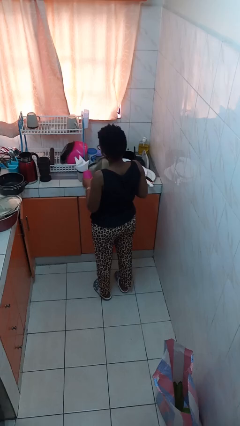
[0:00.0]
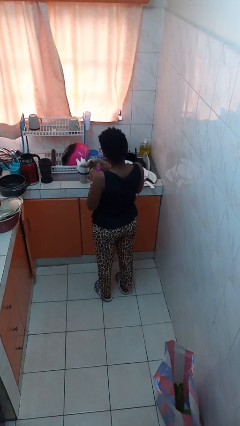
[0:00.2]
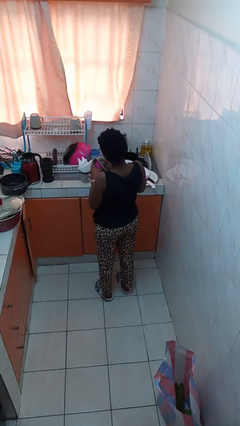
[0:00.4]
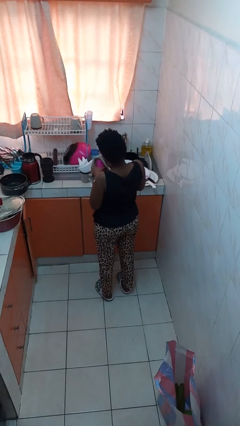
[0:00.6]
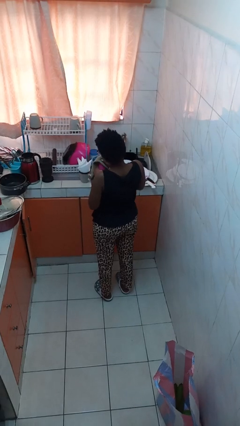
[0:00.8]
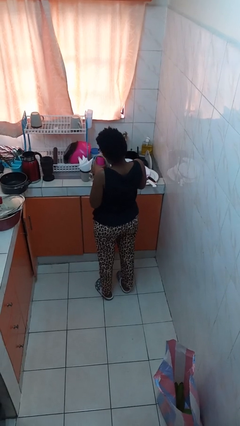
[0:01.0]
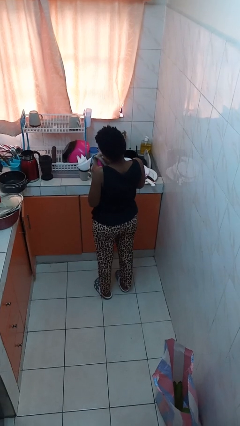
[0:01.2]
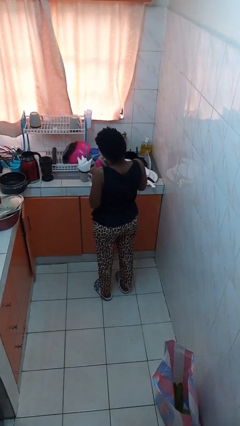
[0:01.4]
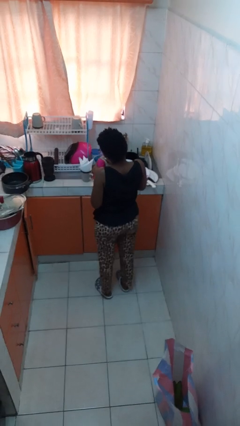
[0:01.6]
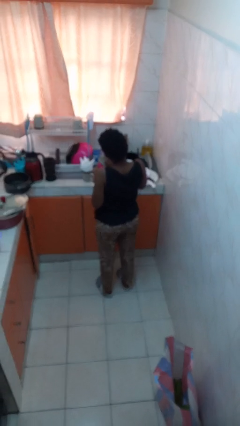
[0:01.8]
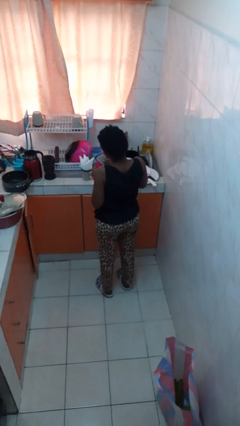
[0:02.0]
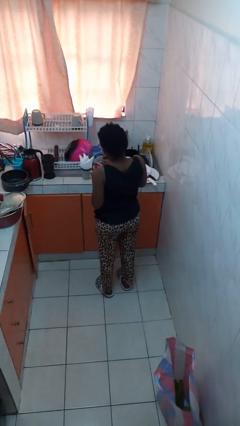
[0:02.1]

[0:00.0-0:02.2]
person dries dish

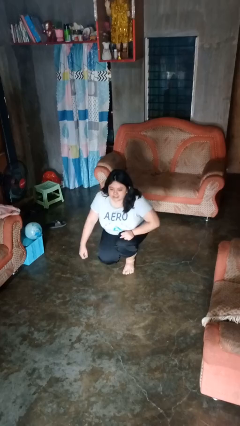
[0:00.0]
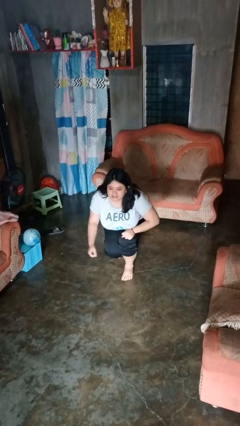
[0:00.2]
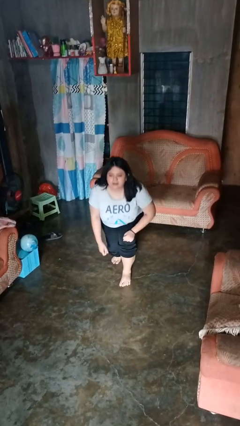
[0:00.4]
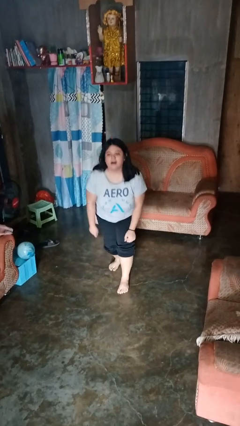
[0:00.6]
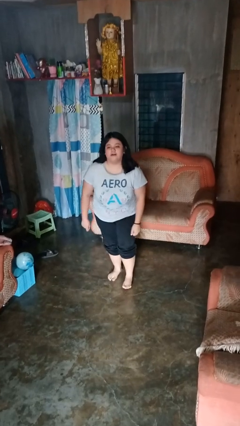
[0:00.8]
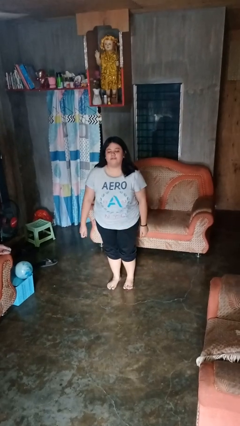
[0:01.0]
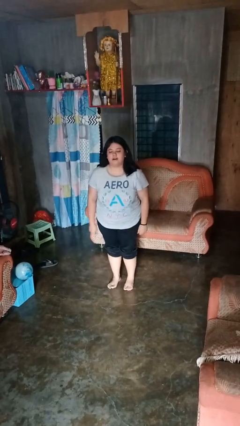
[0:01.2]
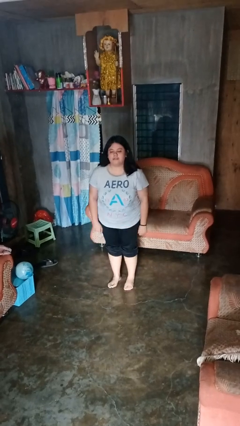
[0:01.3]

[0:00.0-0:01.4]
person stands up from floor

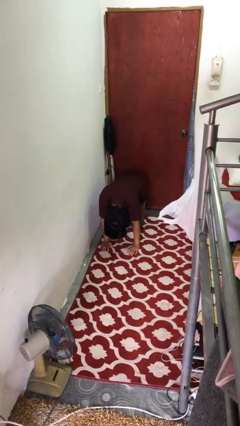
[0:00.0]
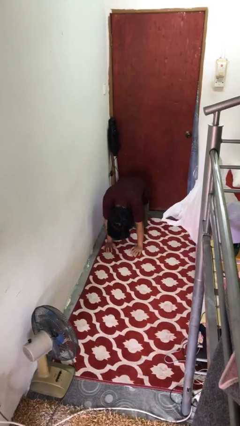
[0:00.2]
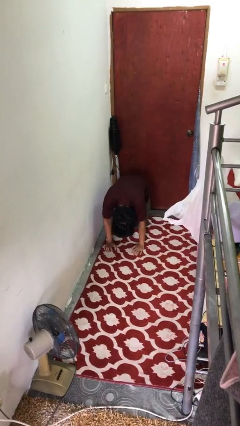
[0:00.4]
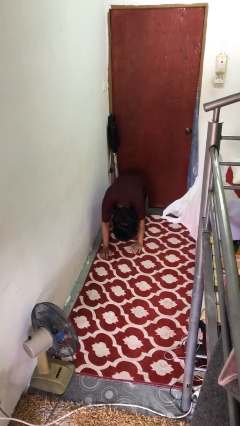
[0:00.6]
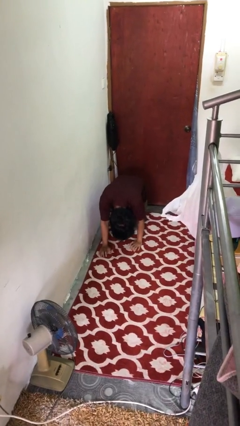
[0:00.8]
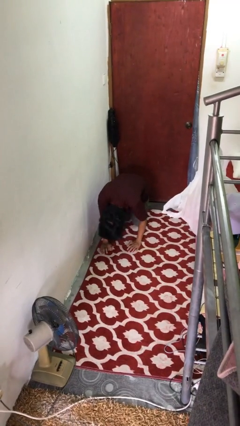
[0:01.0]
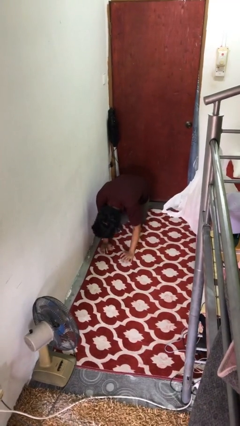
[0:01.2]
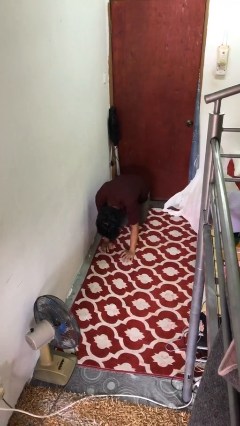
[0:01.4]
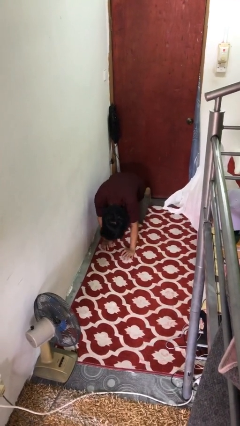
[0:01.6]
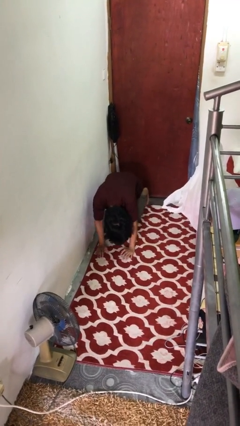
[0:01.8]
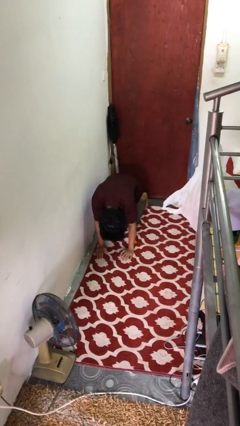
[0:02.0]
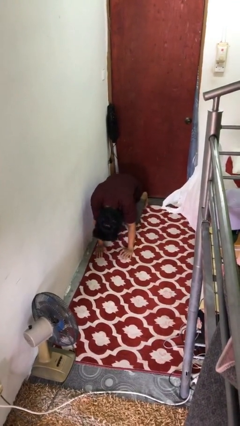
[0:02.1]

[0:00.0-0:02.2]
person crawls

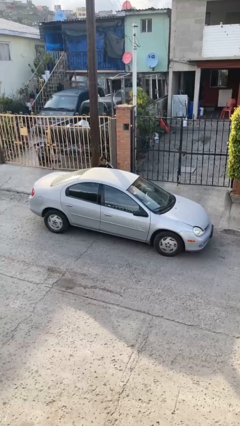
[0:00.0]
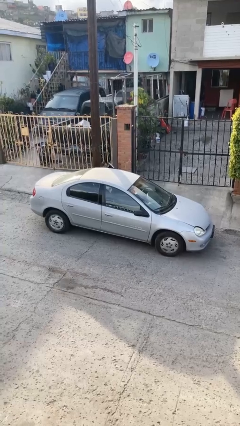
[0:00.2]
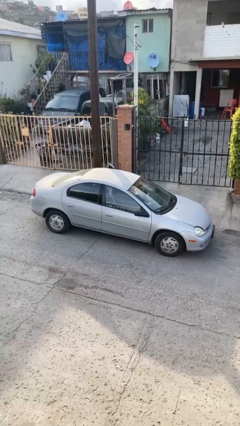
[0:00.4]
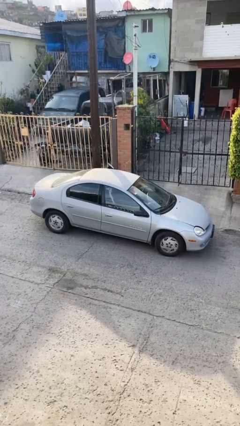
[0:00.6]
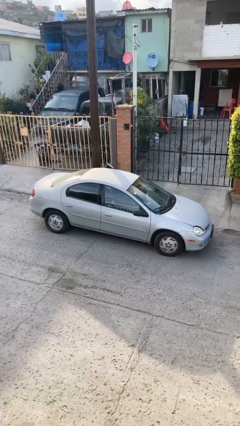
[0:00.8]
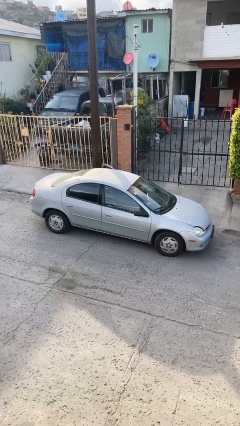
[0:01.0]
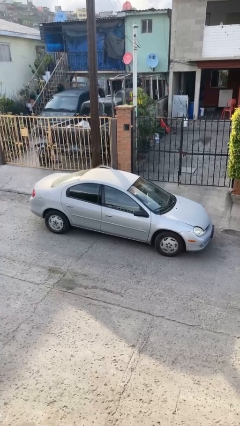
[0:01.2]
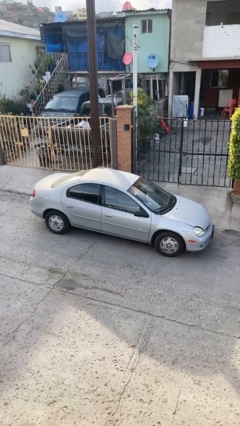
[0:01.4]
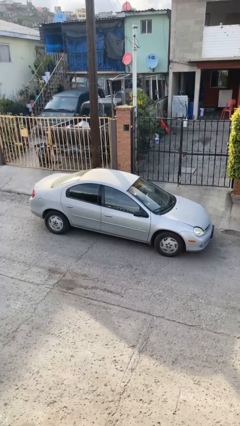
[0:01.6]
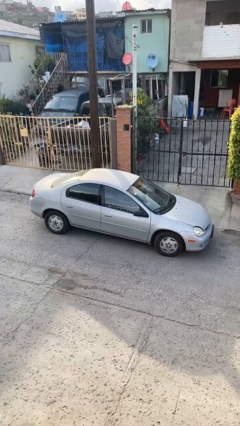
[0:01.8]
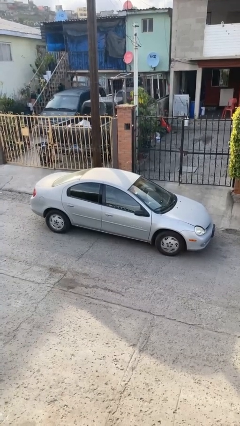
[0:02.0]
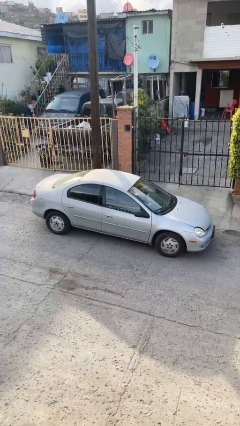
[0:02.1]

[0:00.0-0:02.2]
car picks up person

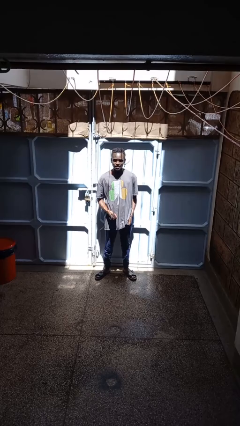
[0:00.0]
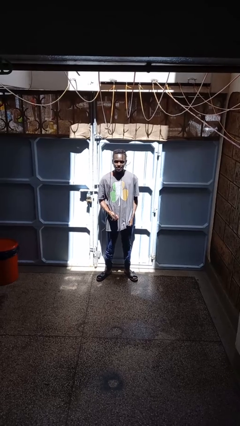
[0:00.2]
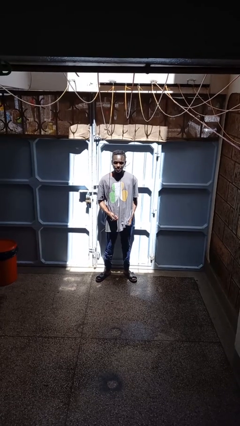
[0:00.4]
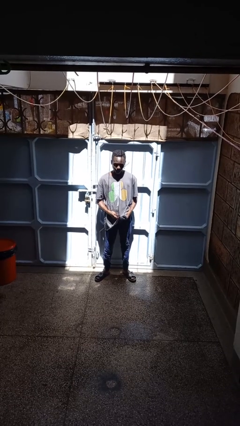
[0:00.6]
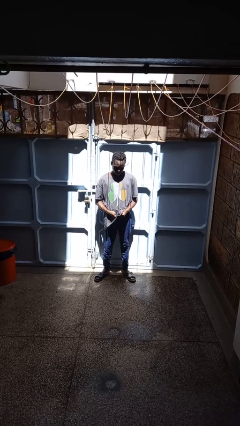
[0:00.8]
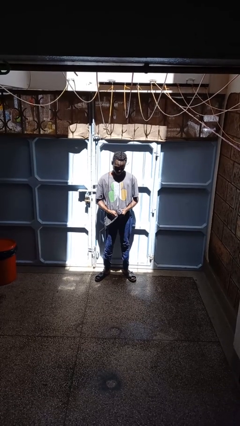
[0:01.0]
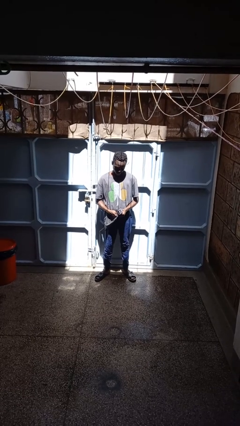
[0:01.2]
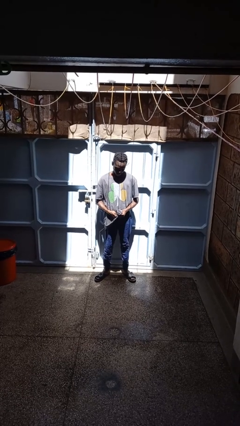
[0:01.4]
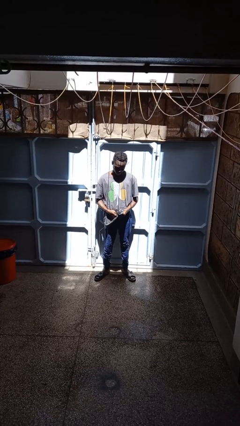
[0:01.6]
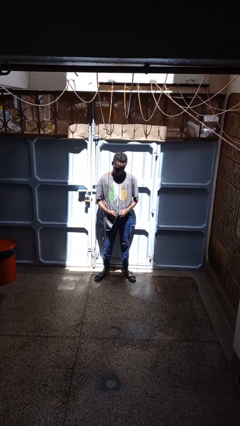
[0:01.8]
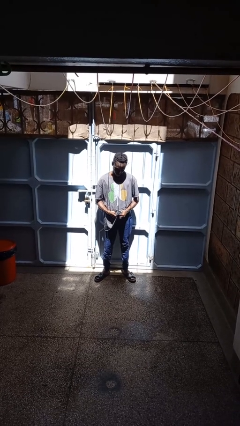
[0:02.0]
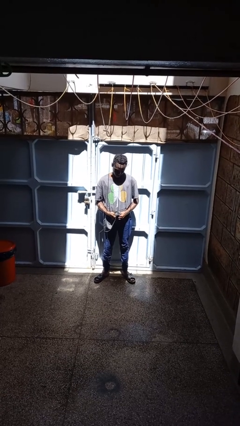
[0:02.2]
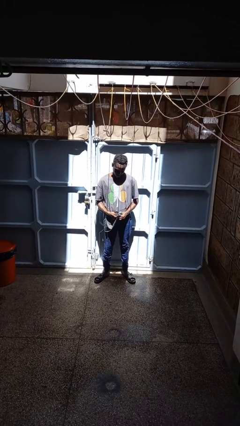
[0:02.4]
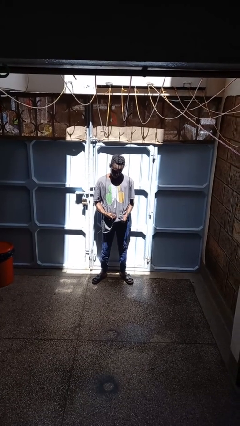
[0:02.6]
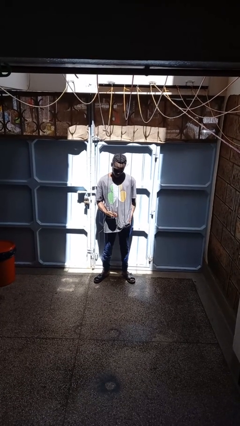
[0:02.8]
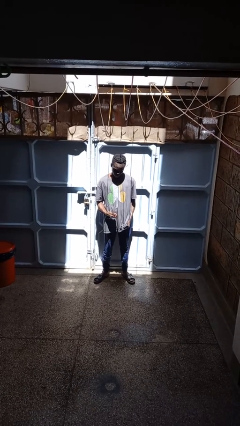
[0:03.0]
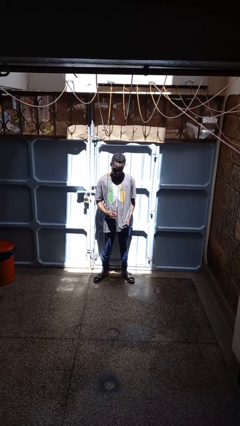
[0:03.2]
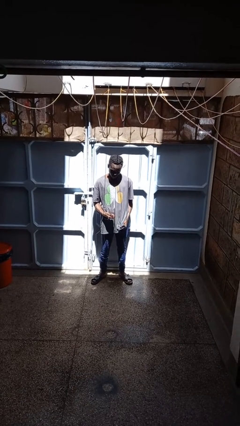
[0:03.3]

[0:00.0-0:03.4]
person cleans eyeglasses

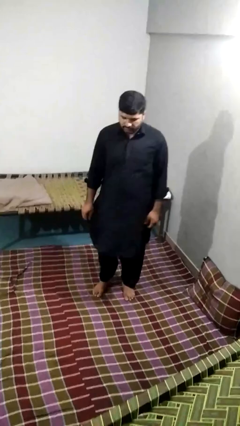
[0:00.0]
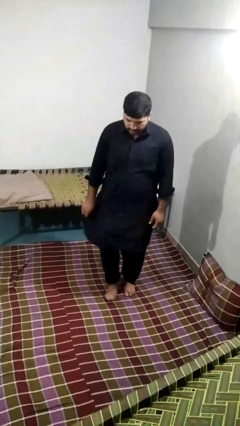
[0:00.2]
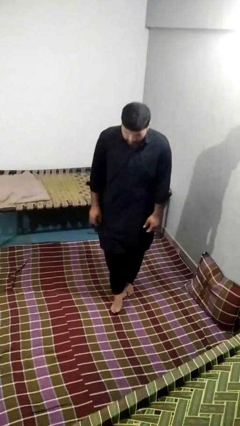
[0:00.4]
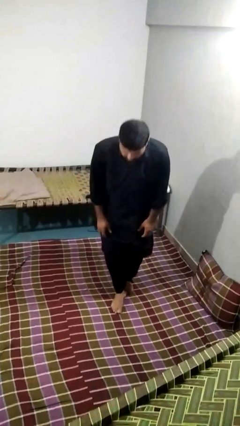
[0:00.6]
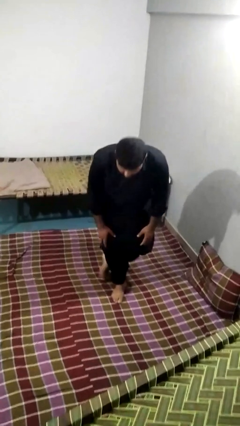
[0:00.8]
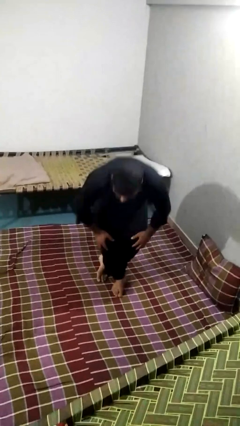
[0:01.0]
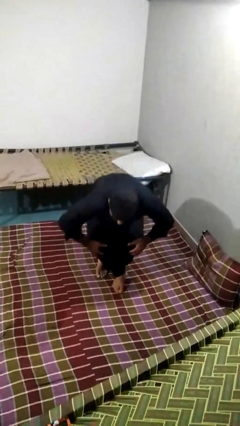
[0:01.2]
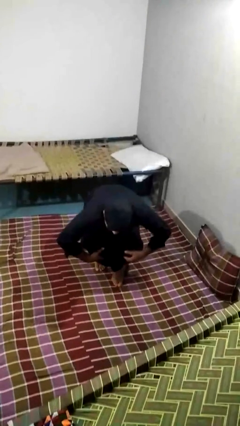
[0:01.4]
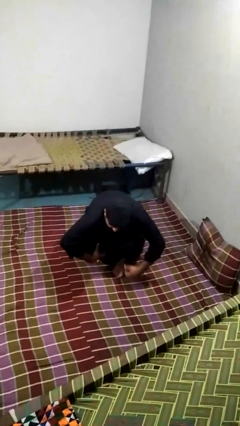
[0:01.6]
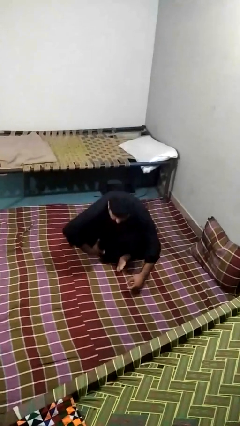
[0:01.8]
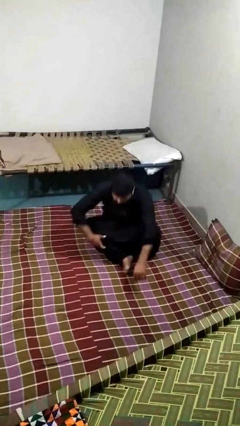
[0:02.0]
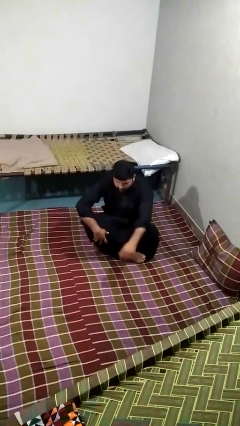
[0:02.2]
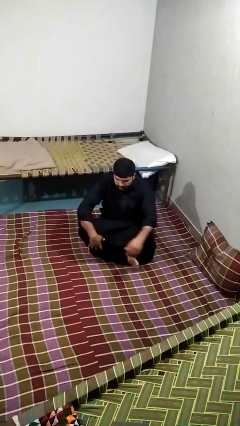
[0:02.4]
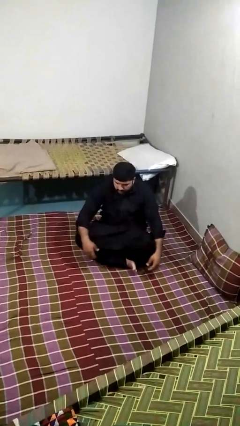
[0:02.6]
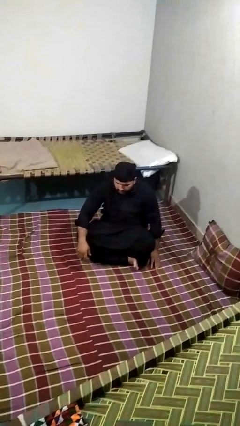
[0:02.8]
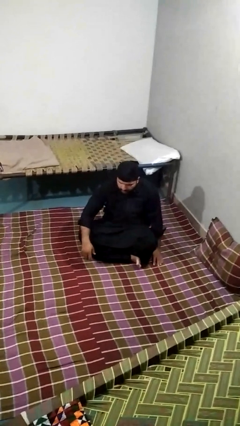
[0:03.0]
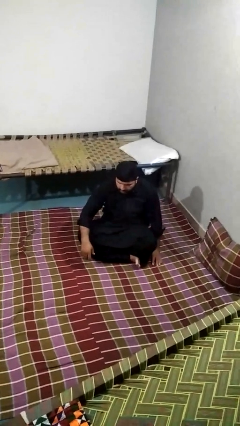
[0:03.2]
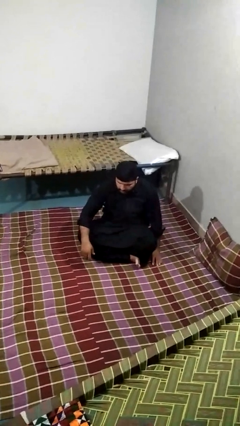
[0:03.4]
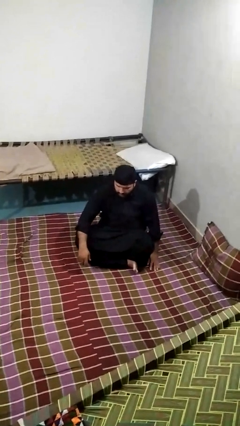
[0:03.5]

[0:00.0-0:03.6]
person sits crisscross

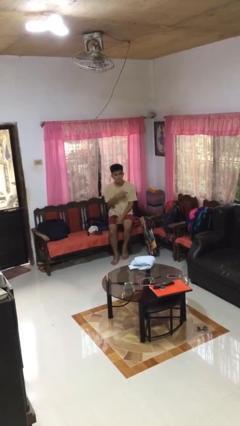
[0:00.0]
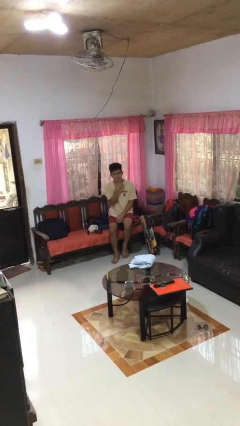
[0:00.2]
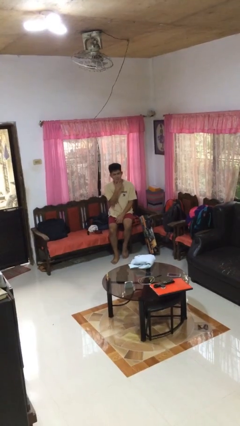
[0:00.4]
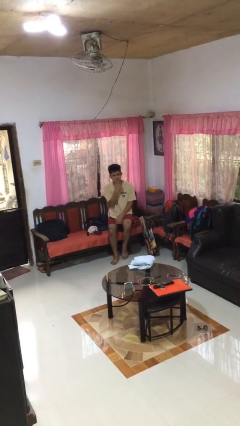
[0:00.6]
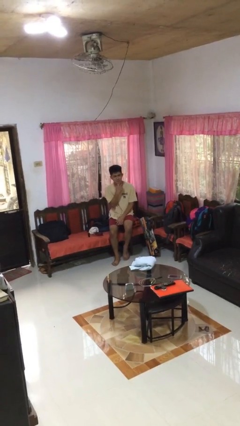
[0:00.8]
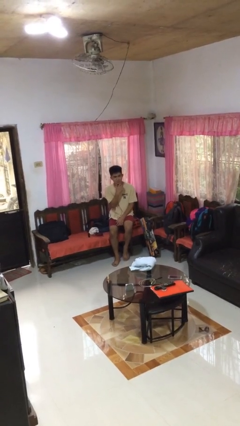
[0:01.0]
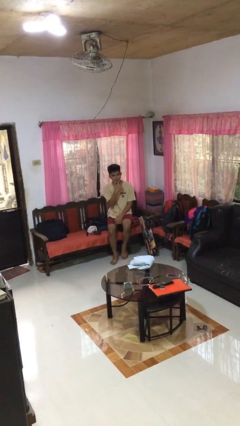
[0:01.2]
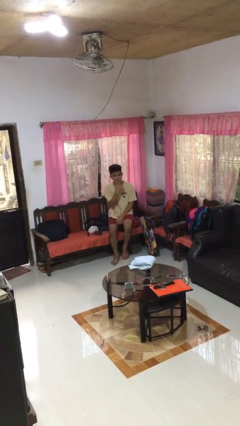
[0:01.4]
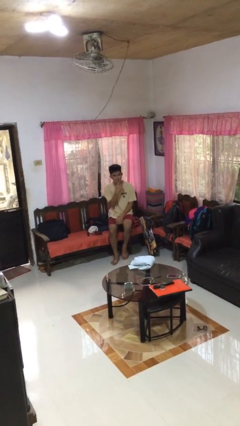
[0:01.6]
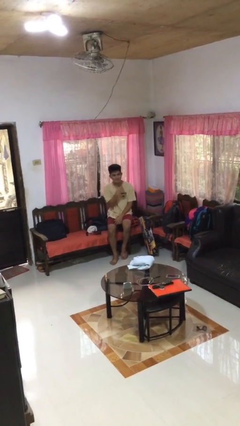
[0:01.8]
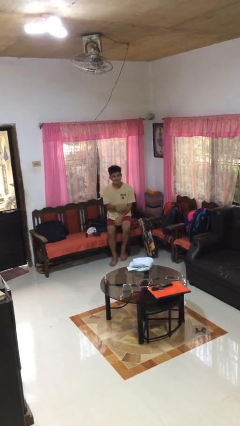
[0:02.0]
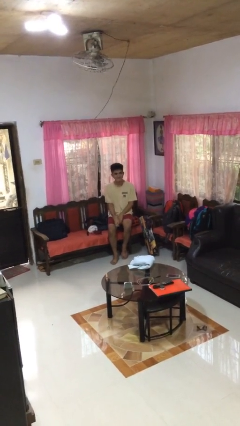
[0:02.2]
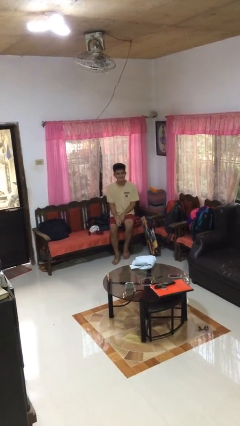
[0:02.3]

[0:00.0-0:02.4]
person strokes chin
